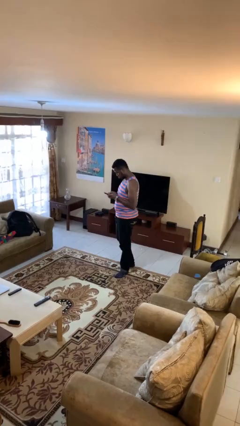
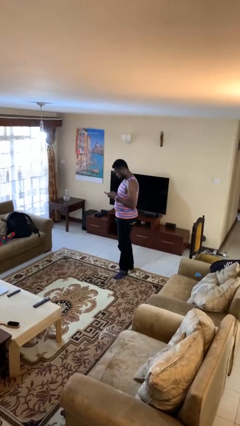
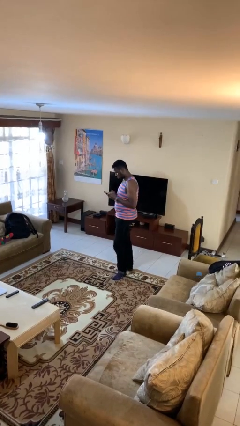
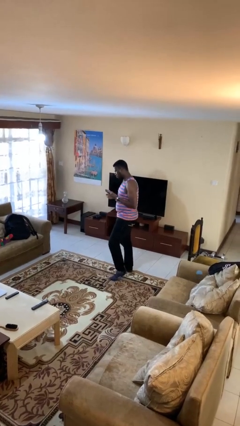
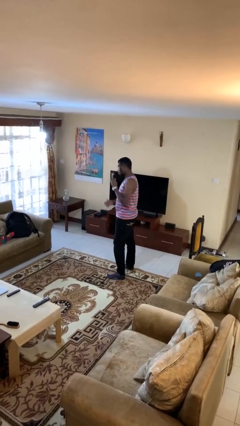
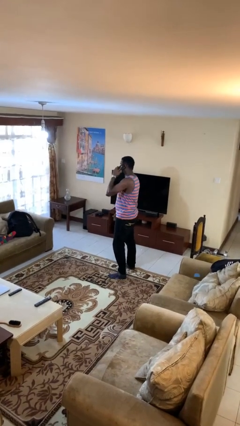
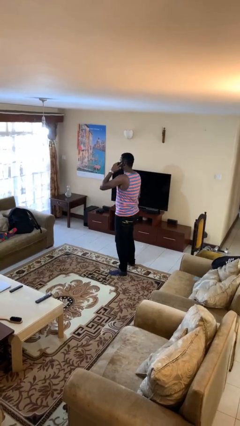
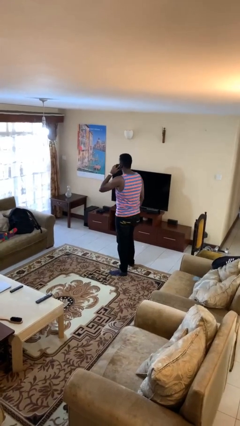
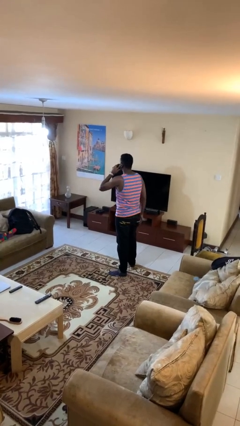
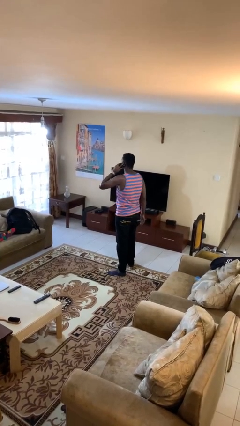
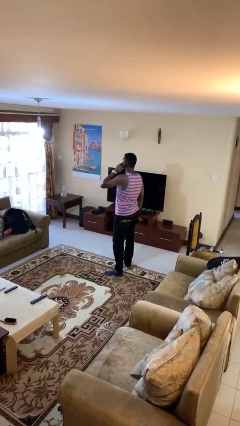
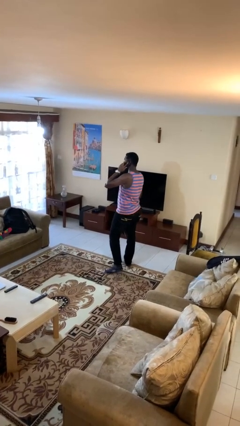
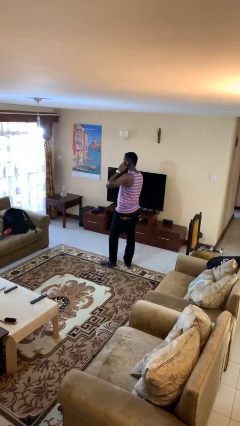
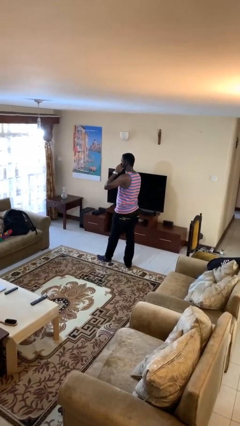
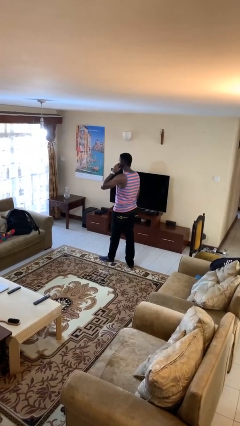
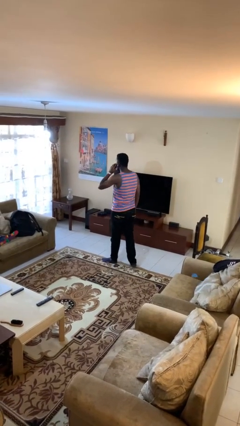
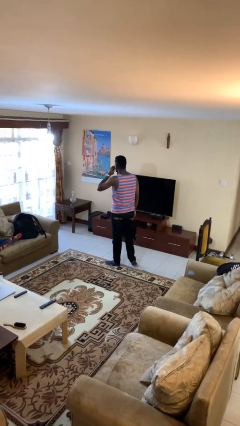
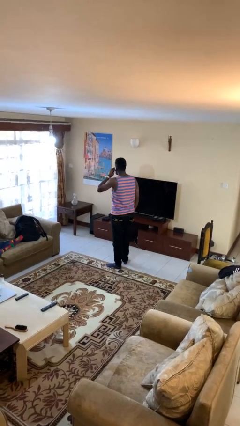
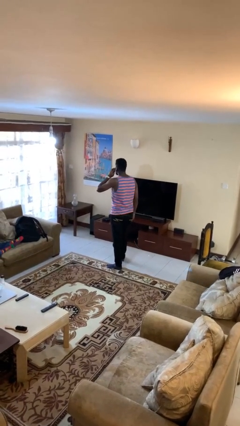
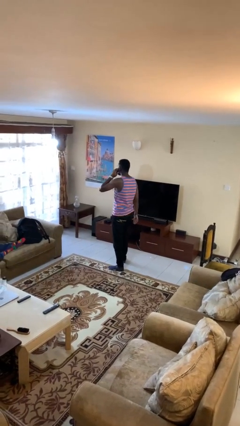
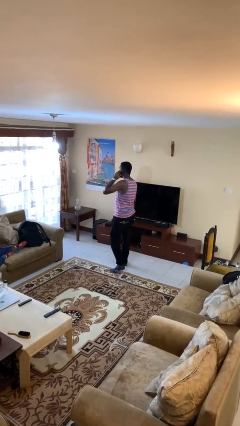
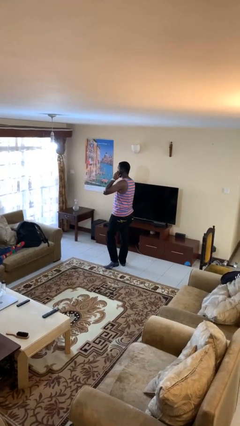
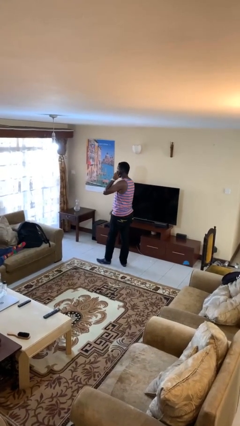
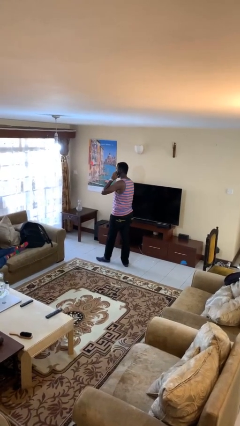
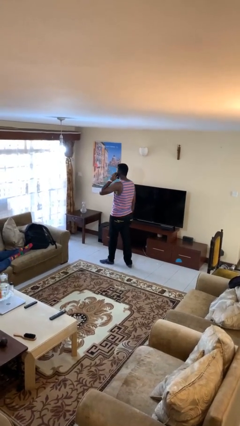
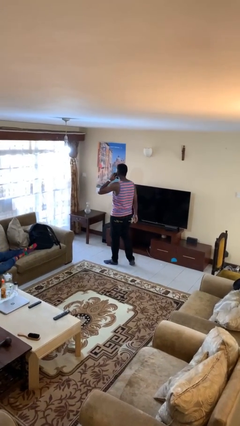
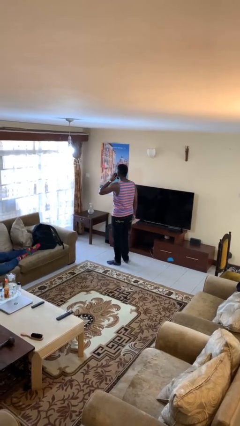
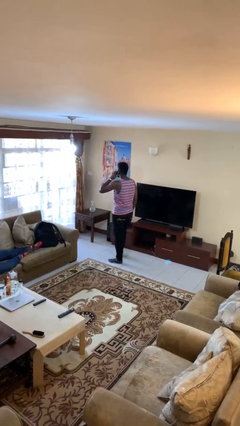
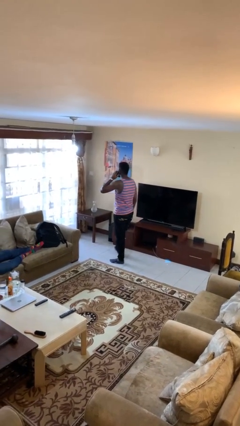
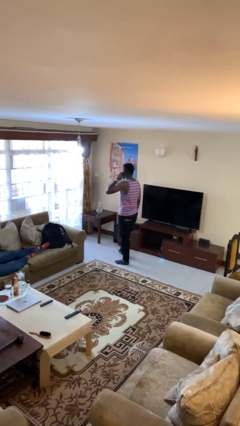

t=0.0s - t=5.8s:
person talks on phone

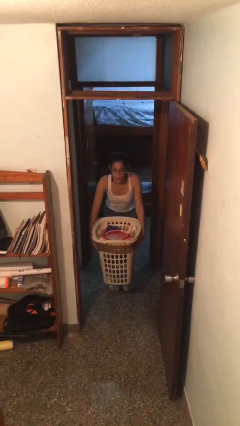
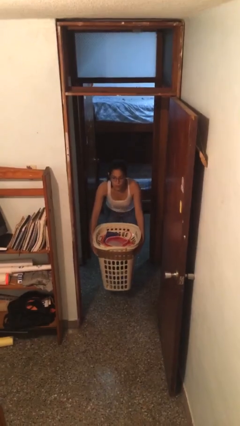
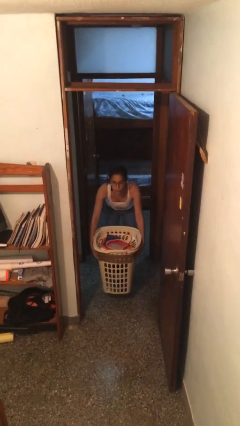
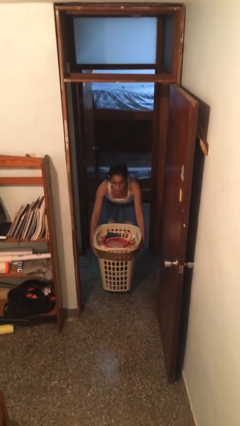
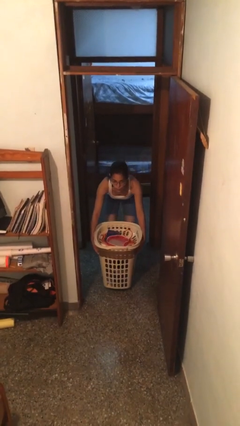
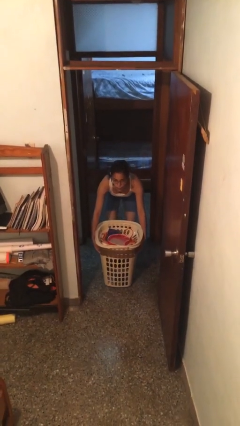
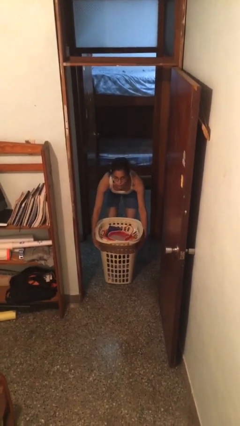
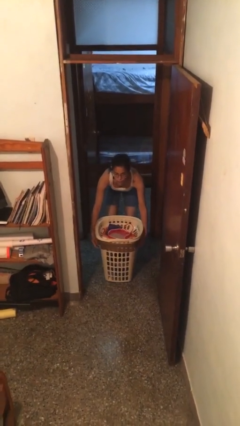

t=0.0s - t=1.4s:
person puts down object on floor

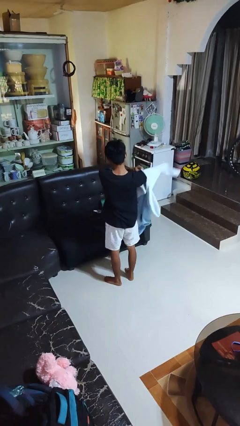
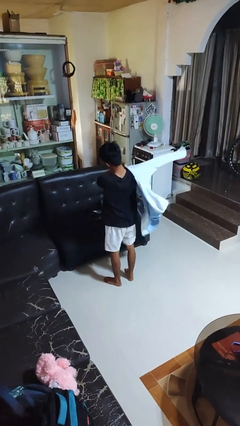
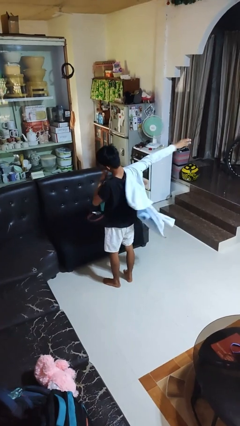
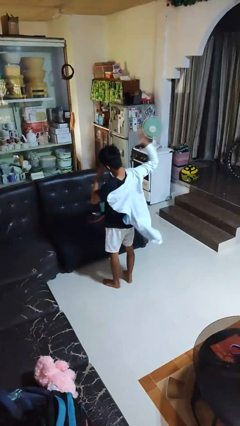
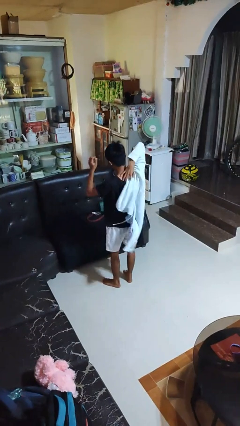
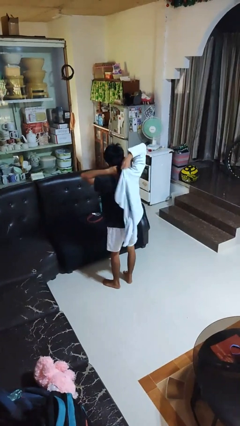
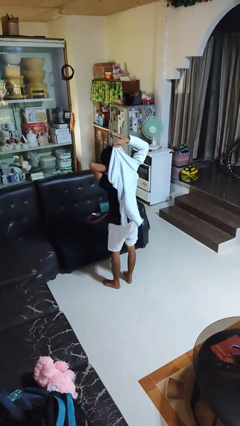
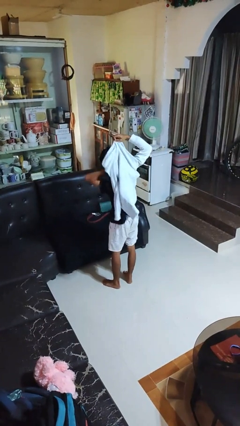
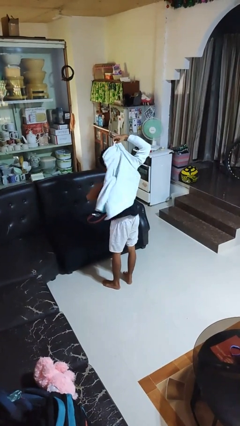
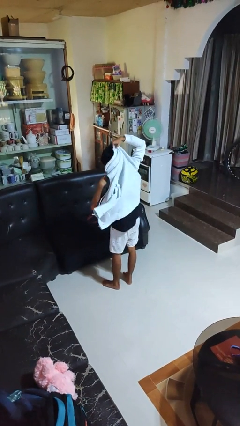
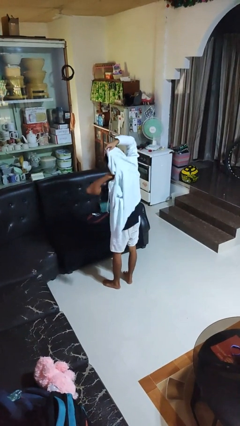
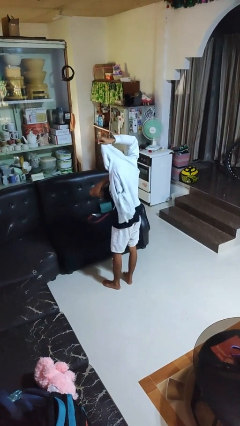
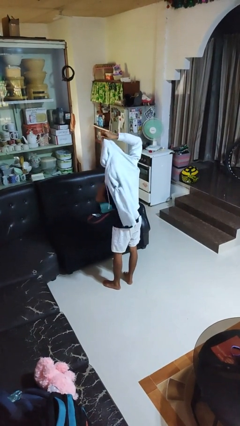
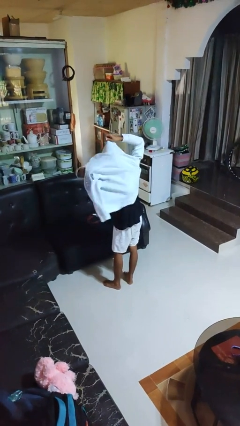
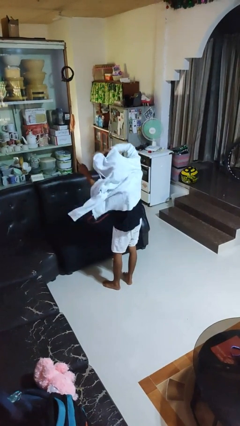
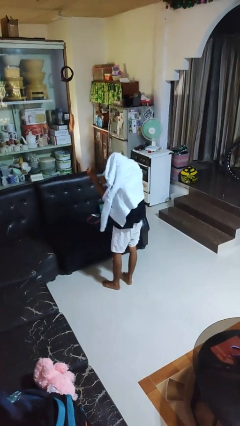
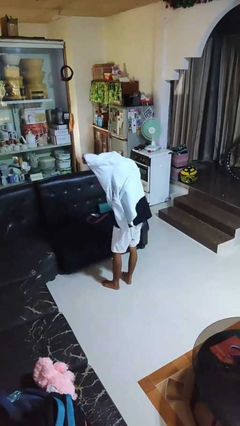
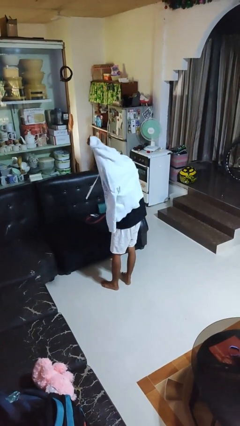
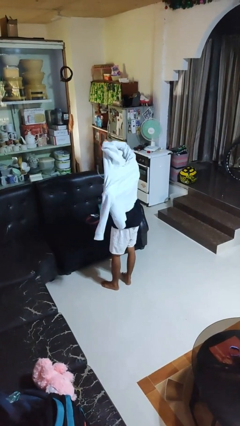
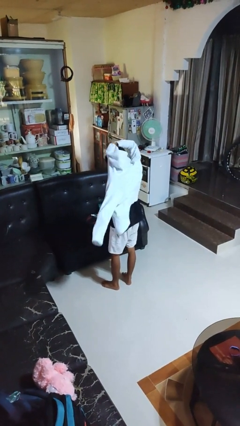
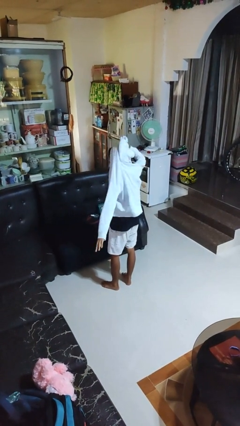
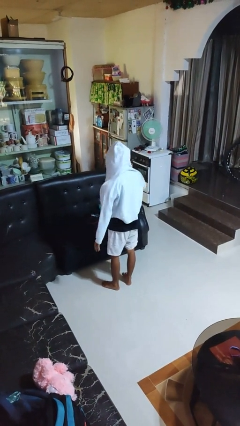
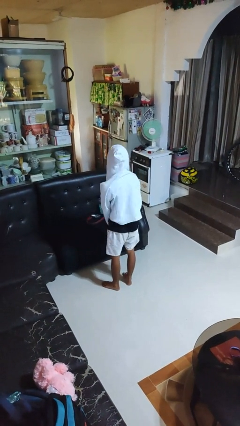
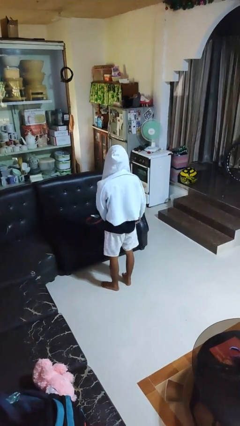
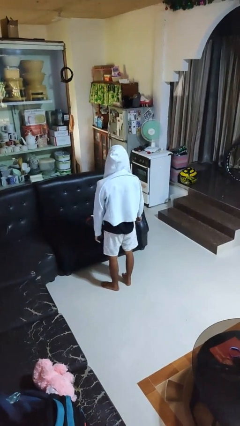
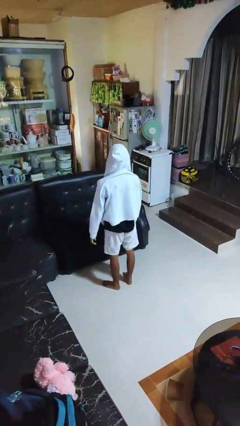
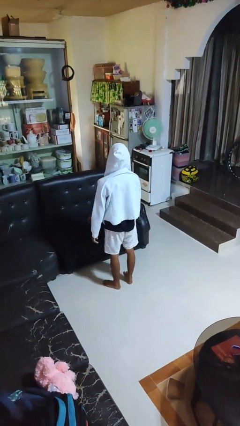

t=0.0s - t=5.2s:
person puts on hoodie

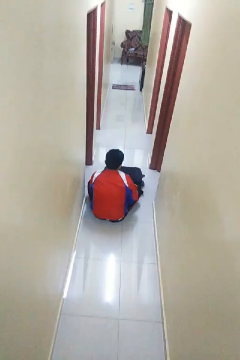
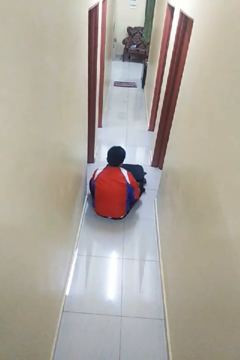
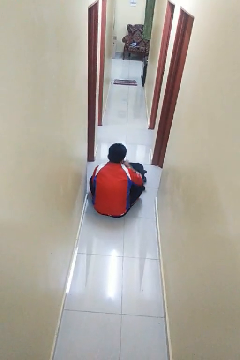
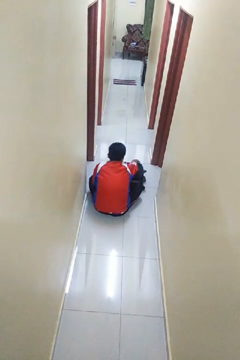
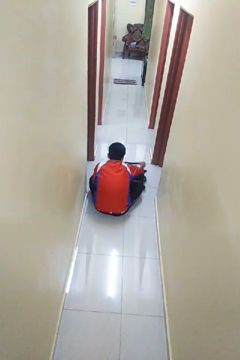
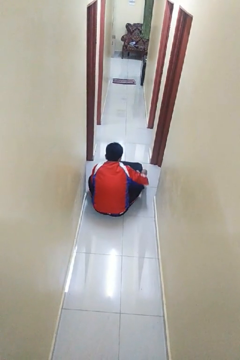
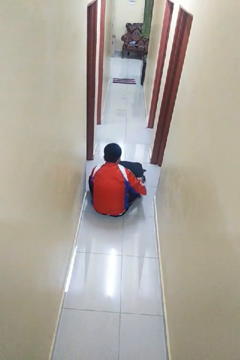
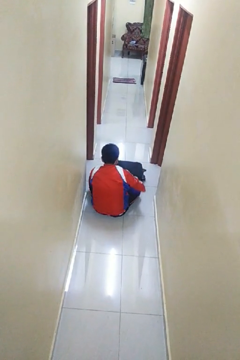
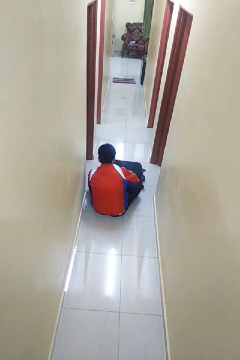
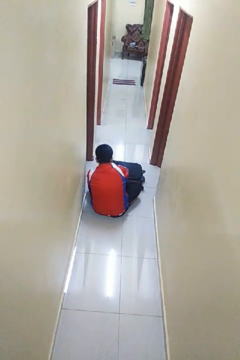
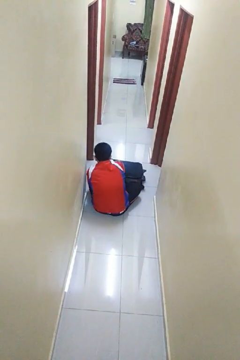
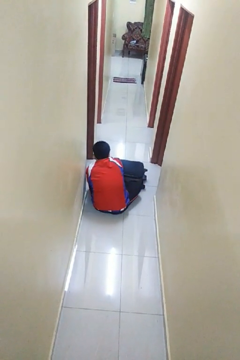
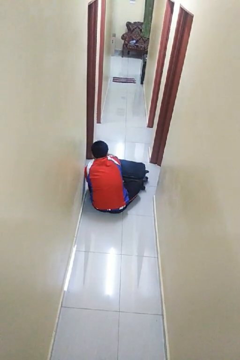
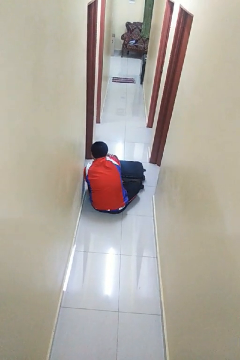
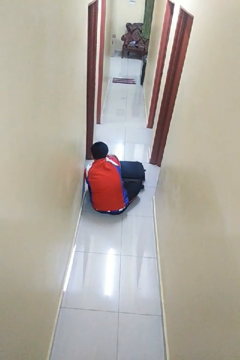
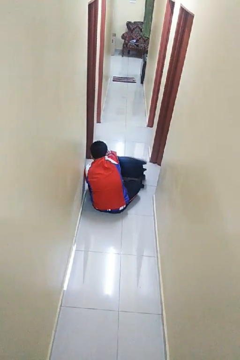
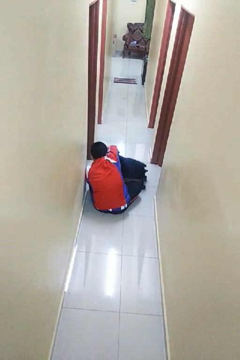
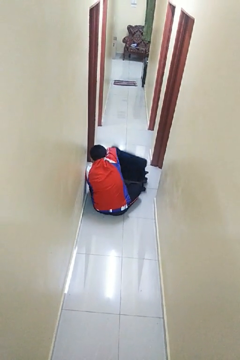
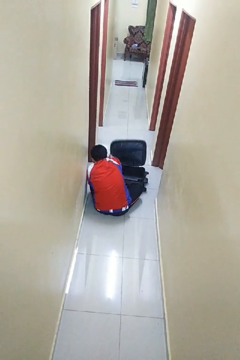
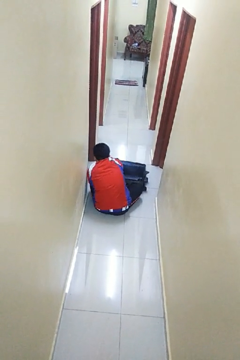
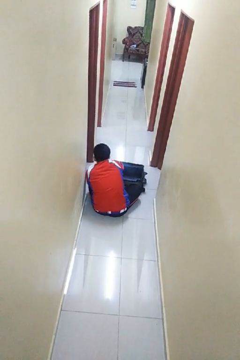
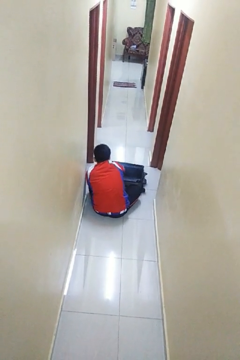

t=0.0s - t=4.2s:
person opens suitcase

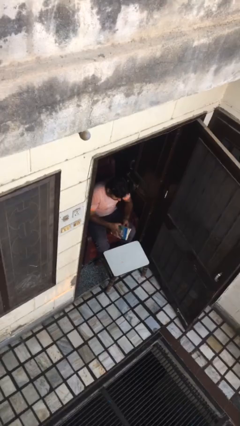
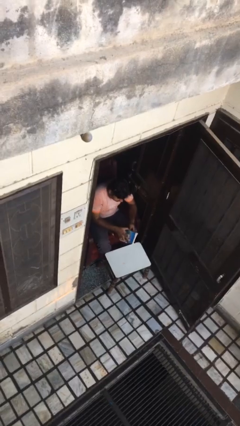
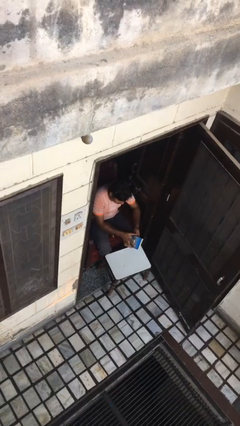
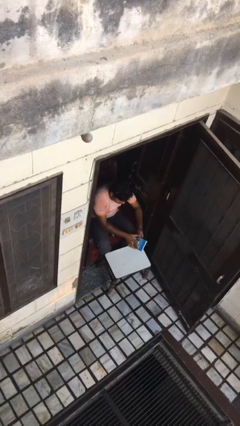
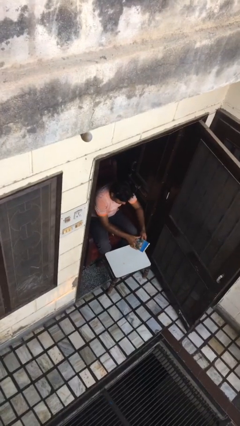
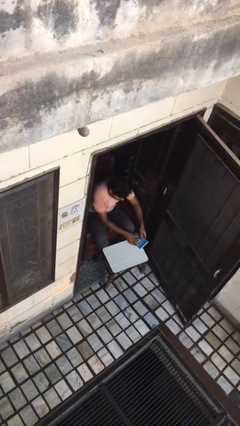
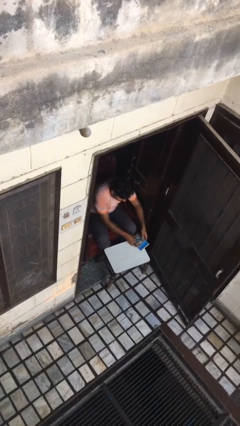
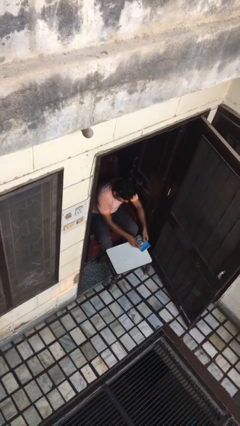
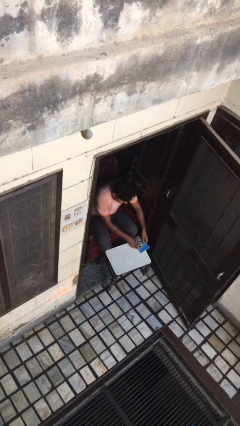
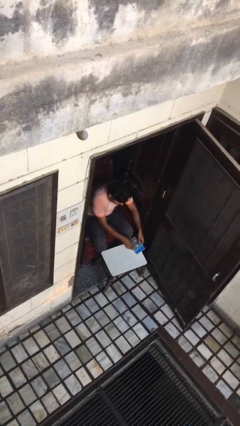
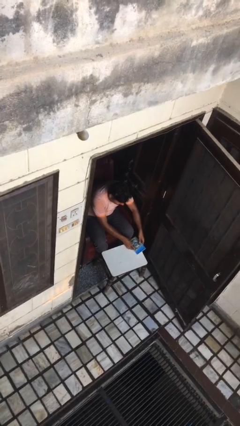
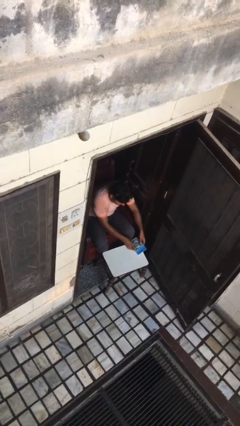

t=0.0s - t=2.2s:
person puts down object on table
